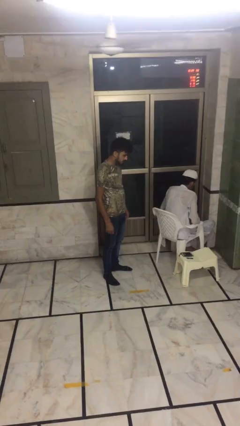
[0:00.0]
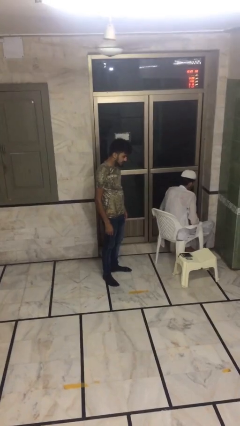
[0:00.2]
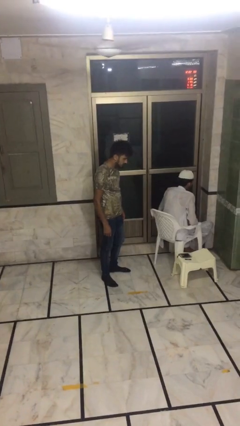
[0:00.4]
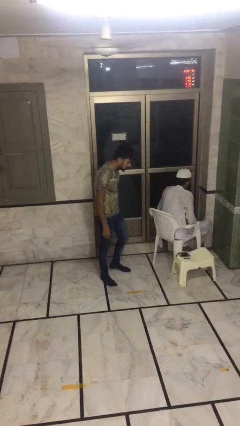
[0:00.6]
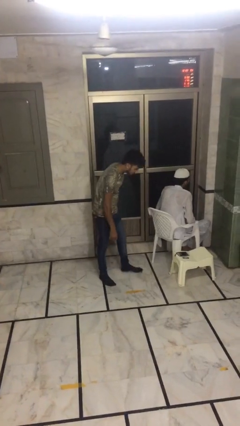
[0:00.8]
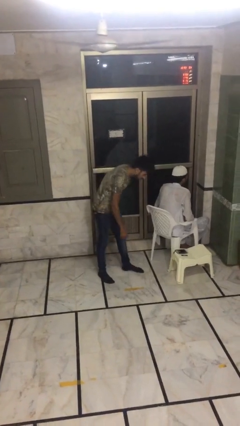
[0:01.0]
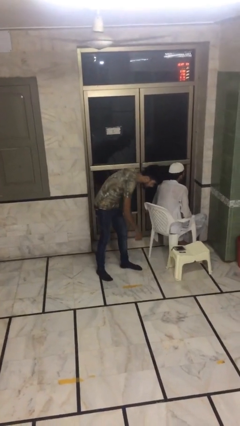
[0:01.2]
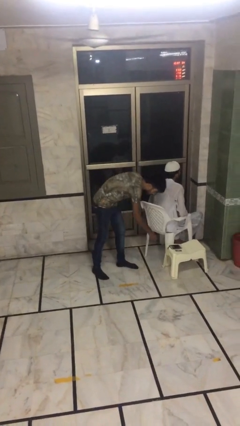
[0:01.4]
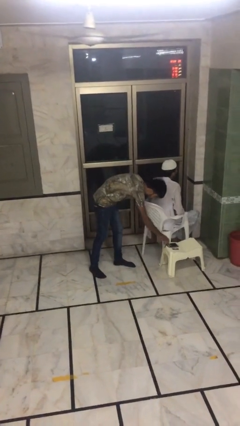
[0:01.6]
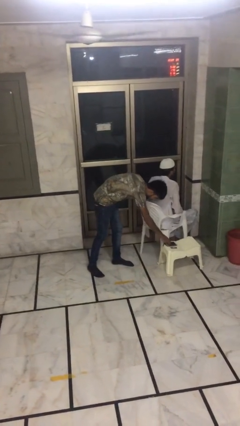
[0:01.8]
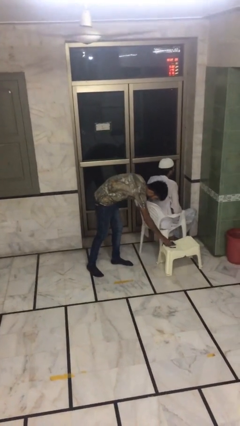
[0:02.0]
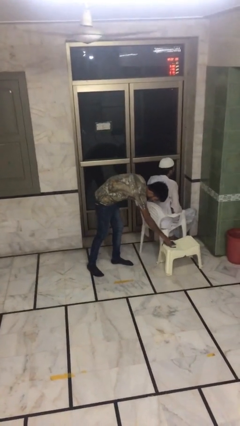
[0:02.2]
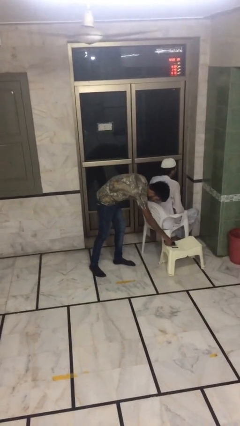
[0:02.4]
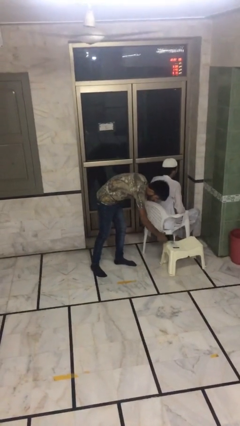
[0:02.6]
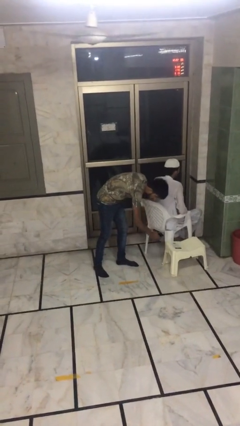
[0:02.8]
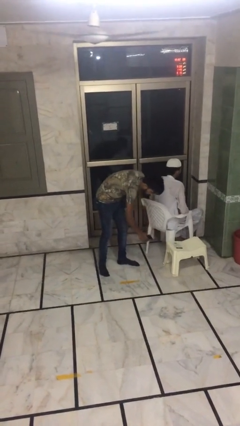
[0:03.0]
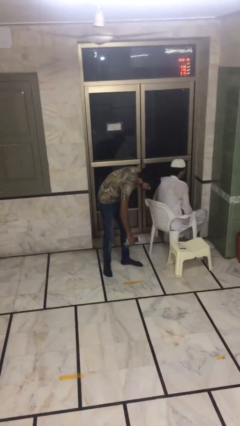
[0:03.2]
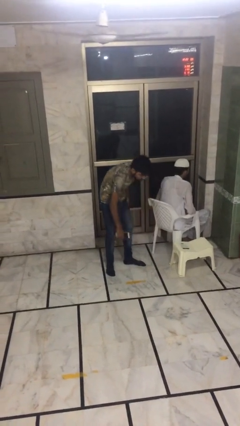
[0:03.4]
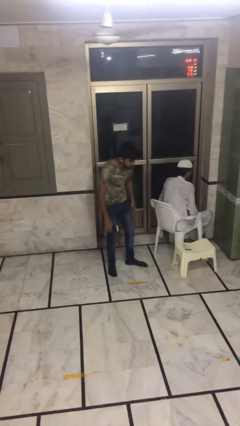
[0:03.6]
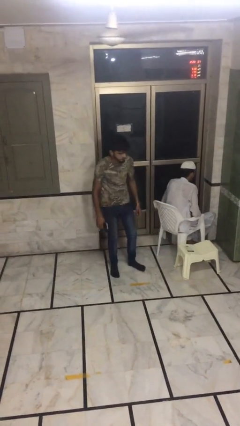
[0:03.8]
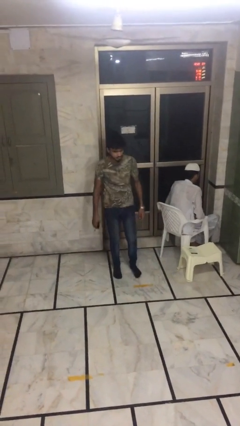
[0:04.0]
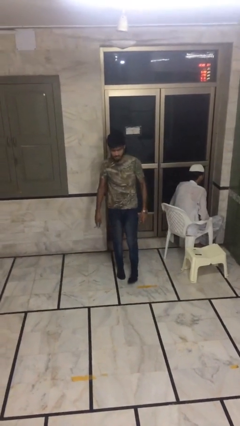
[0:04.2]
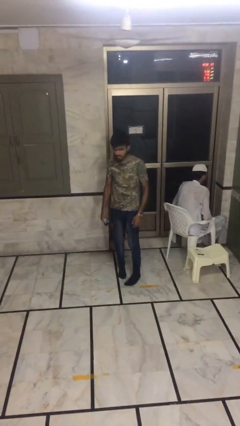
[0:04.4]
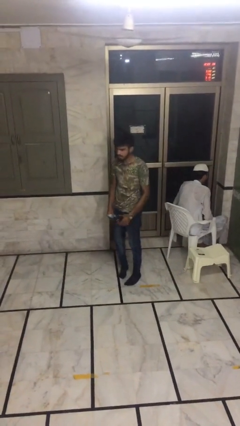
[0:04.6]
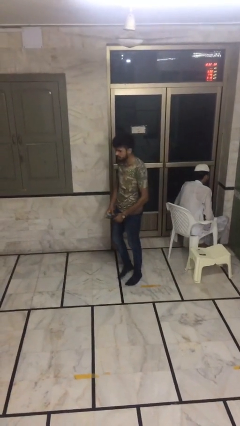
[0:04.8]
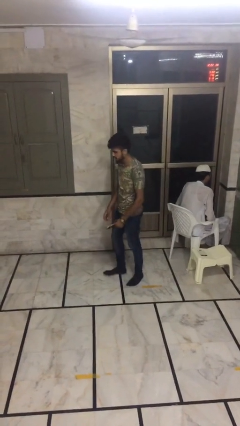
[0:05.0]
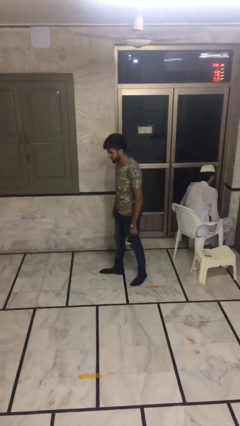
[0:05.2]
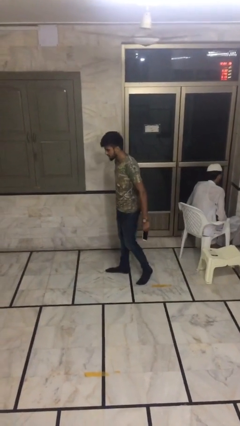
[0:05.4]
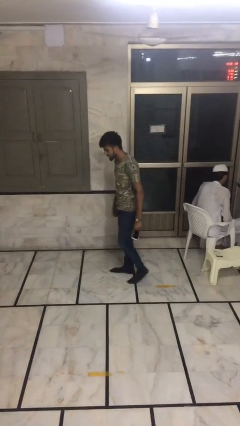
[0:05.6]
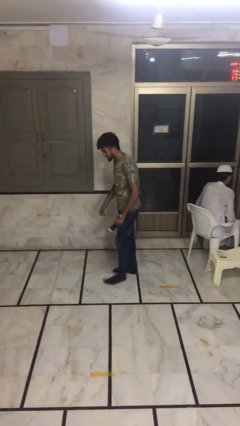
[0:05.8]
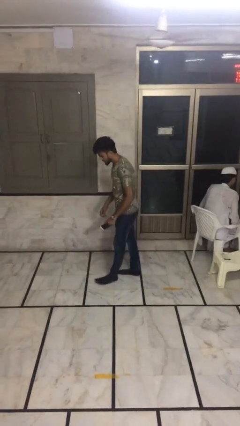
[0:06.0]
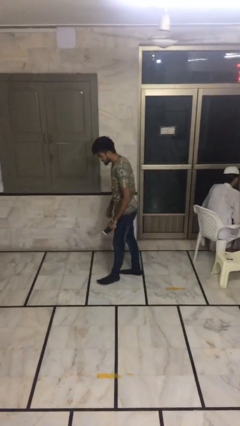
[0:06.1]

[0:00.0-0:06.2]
person steals object from person

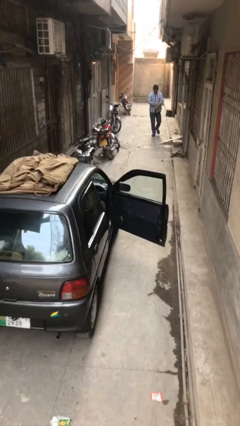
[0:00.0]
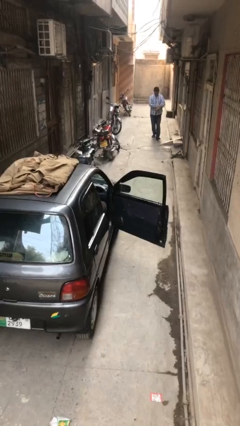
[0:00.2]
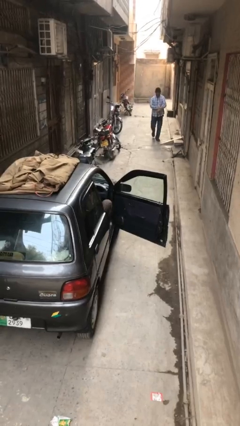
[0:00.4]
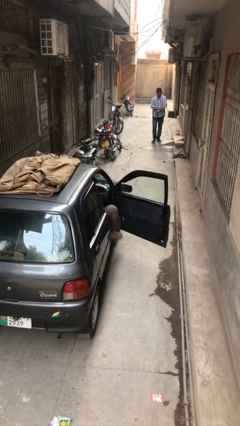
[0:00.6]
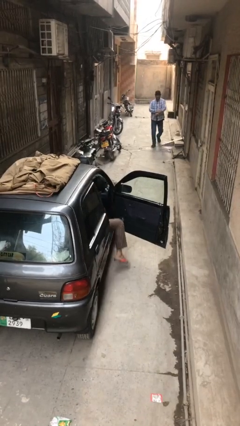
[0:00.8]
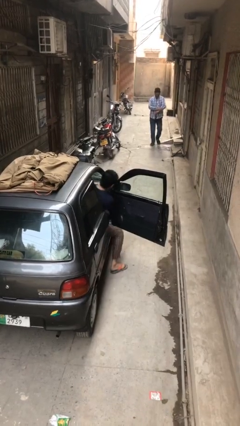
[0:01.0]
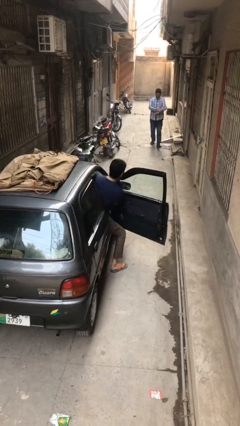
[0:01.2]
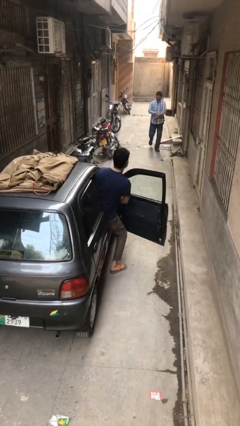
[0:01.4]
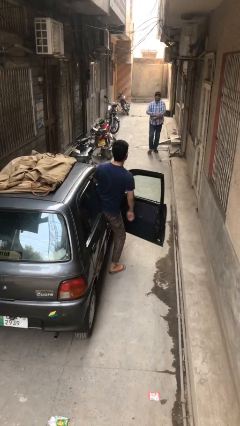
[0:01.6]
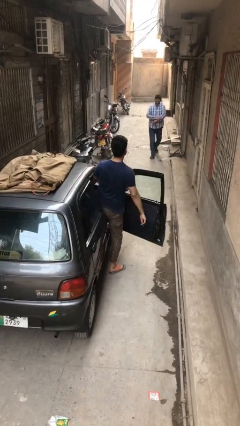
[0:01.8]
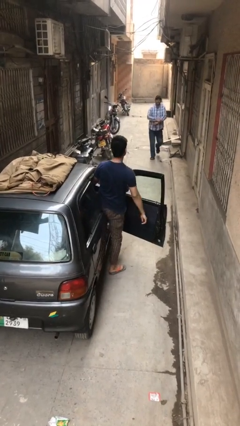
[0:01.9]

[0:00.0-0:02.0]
person exits car

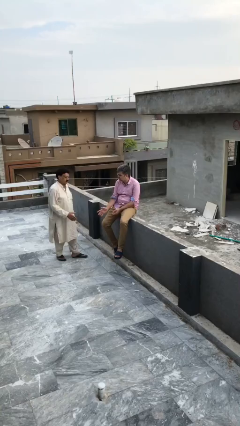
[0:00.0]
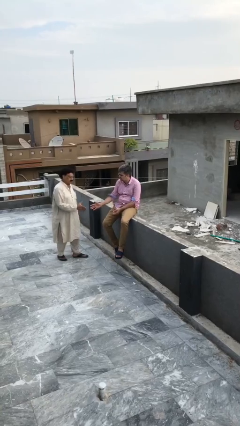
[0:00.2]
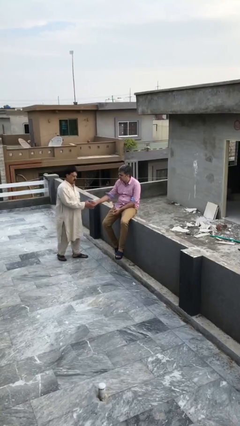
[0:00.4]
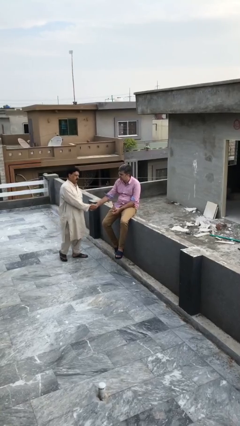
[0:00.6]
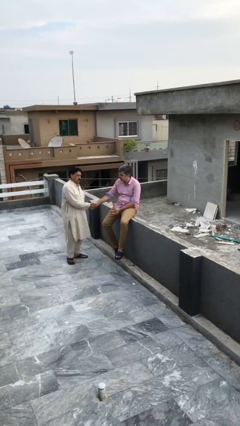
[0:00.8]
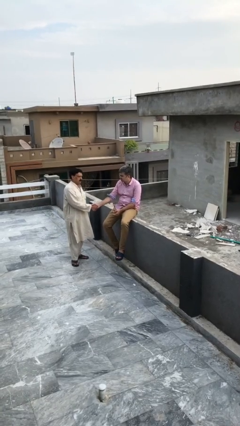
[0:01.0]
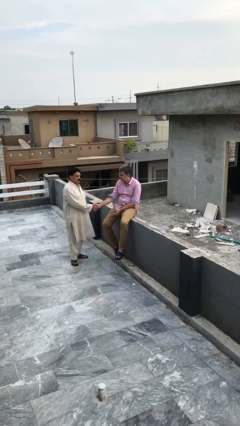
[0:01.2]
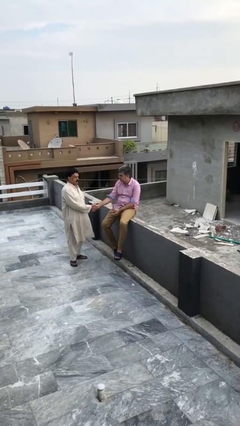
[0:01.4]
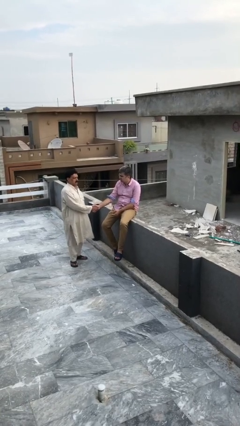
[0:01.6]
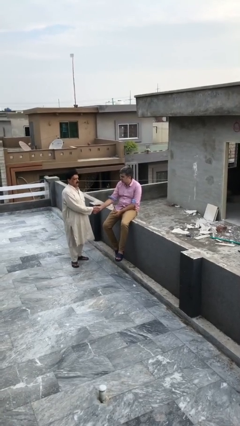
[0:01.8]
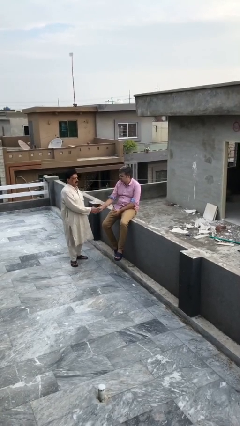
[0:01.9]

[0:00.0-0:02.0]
person shakes hand

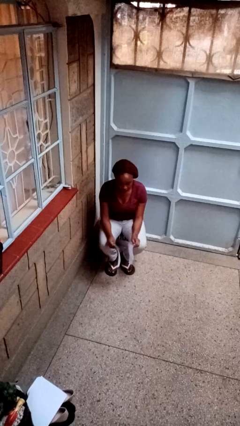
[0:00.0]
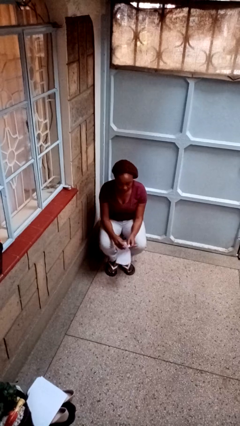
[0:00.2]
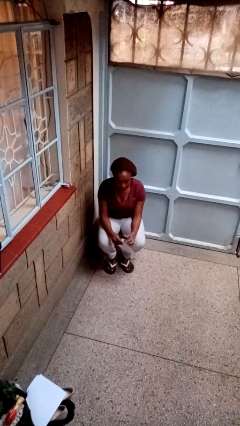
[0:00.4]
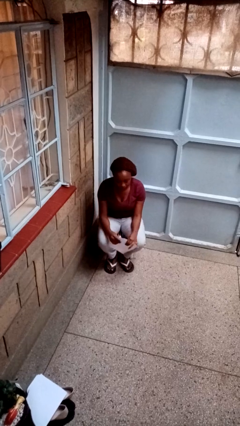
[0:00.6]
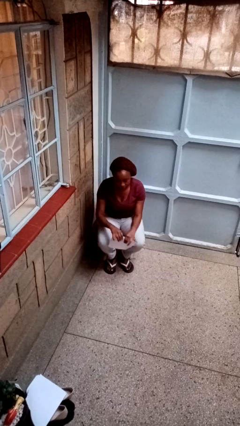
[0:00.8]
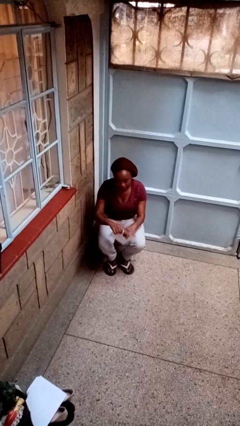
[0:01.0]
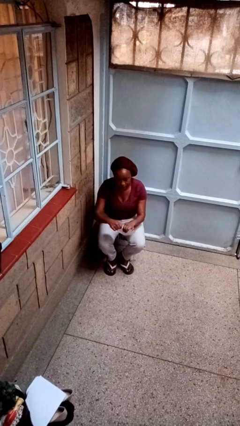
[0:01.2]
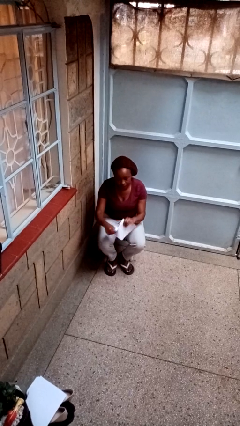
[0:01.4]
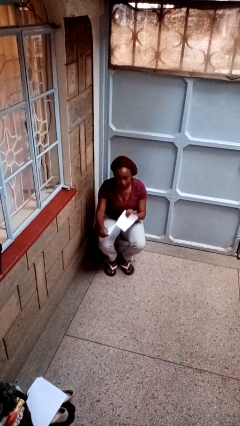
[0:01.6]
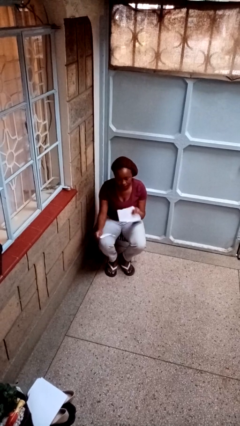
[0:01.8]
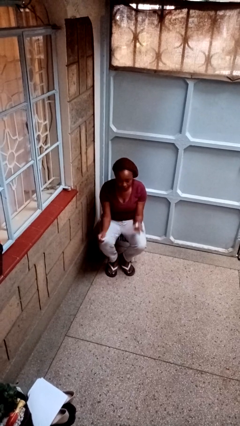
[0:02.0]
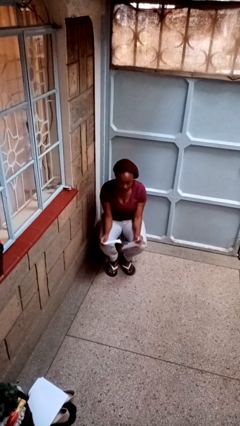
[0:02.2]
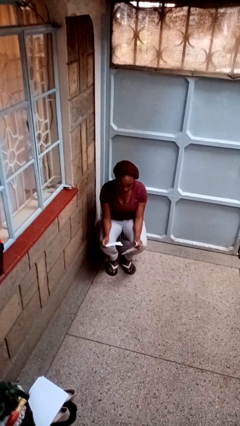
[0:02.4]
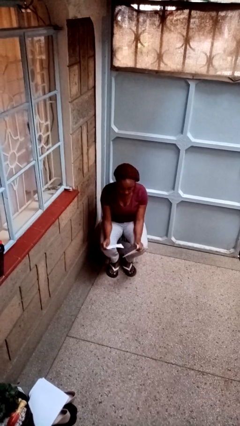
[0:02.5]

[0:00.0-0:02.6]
person tears paper

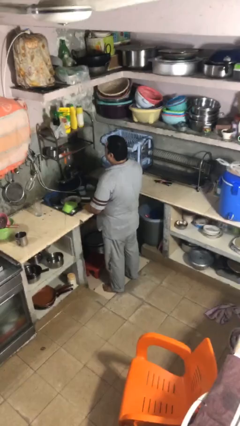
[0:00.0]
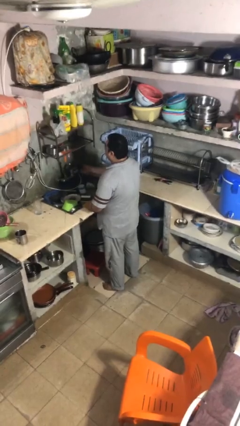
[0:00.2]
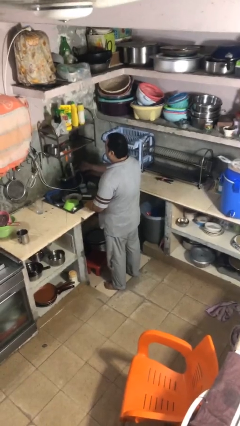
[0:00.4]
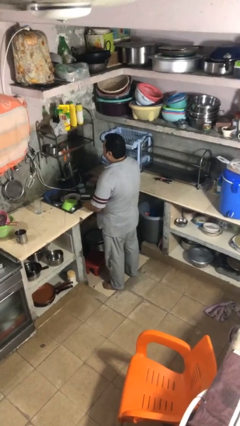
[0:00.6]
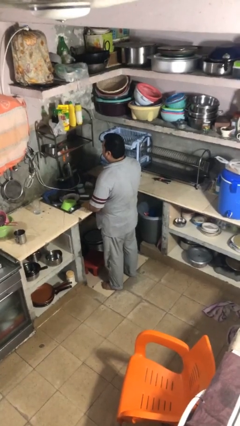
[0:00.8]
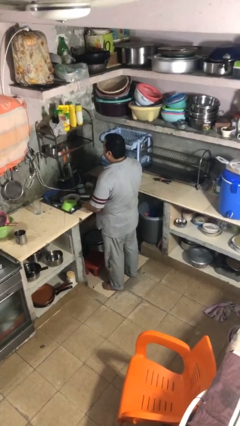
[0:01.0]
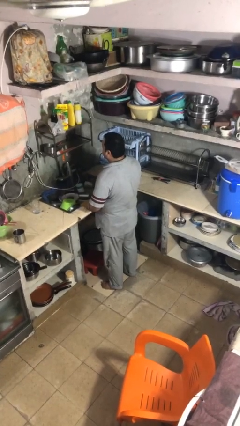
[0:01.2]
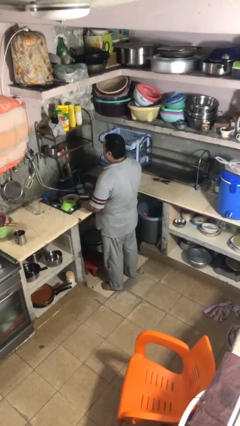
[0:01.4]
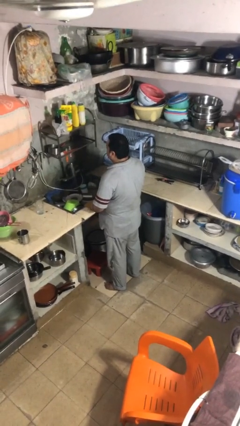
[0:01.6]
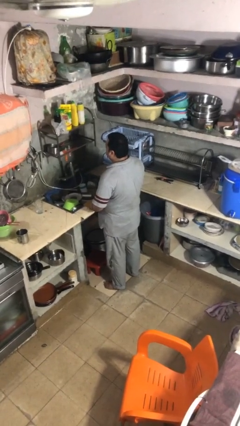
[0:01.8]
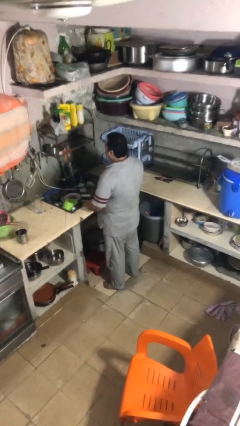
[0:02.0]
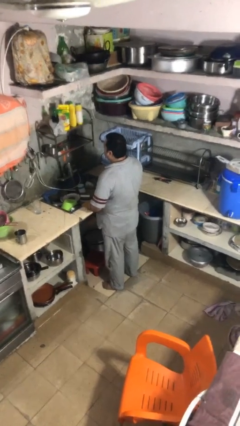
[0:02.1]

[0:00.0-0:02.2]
person turns on faucet

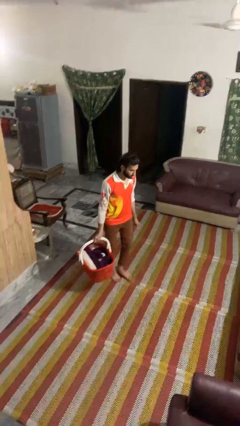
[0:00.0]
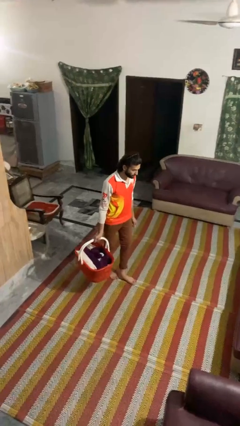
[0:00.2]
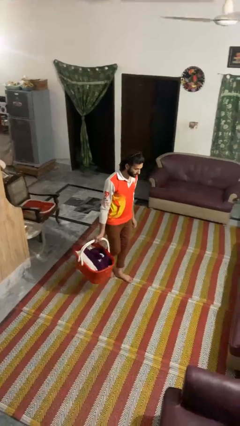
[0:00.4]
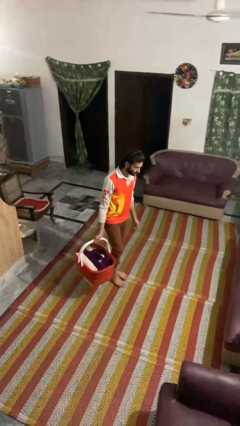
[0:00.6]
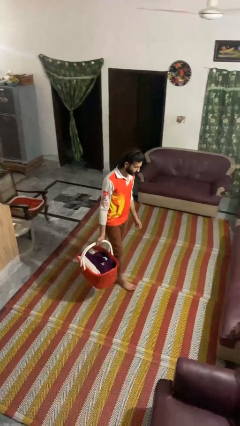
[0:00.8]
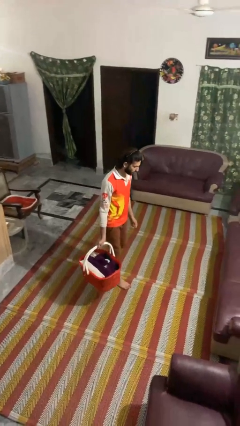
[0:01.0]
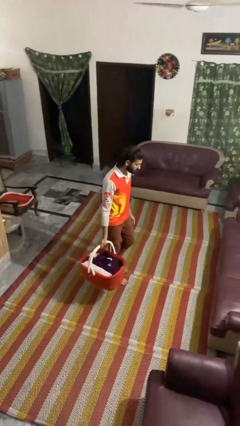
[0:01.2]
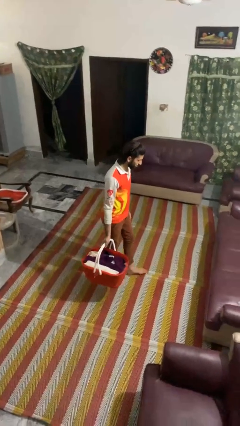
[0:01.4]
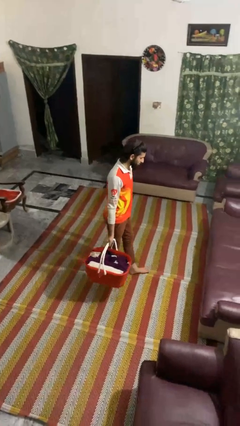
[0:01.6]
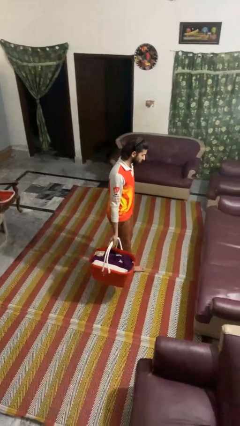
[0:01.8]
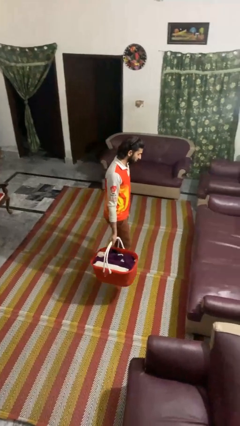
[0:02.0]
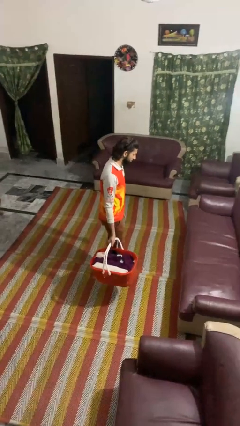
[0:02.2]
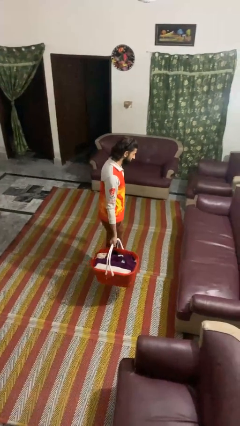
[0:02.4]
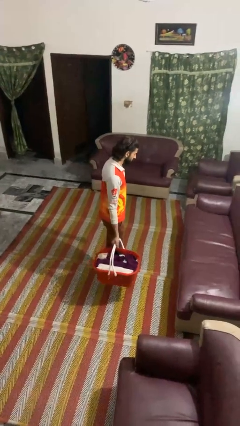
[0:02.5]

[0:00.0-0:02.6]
person carries laundry basket

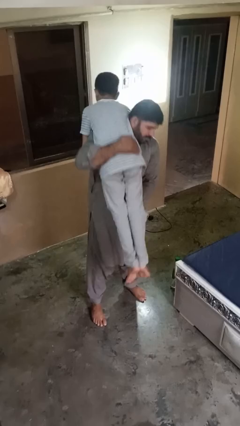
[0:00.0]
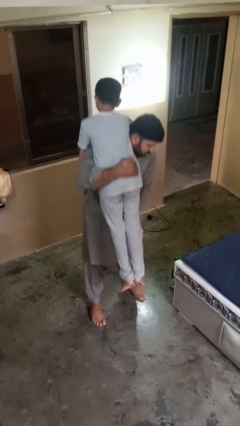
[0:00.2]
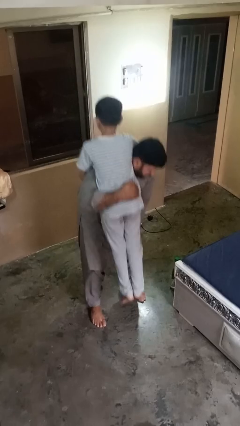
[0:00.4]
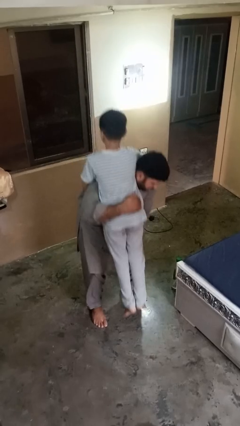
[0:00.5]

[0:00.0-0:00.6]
person carries person on shoulders
